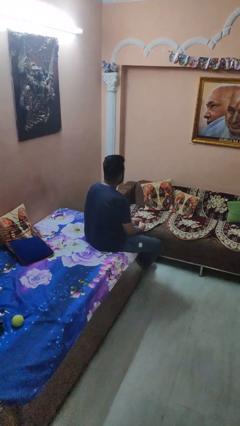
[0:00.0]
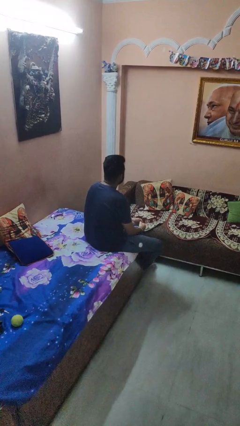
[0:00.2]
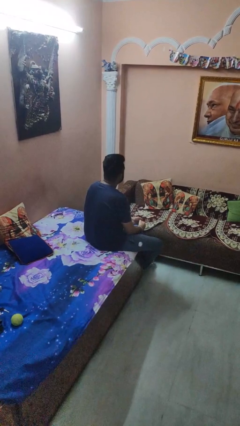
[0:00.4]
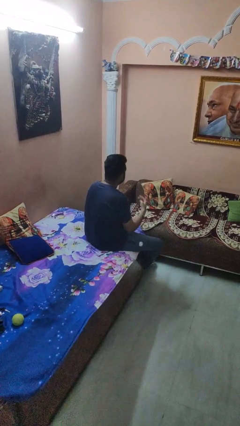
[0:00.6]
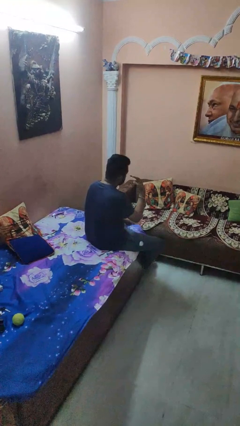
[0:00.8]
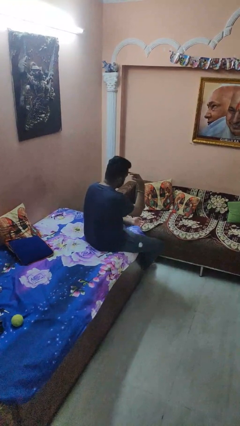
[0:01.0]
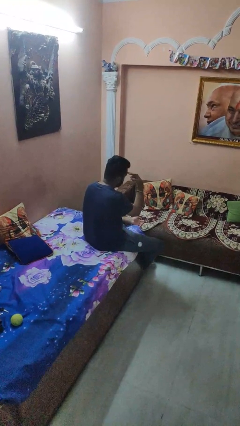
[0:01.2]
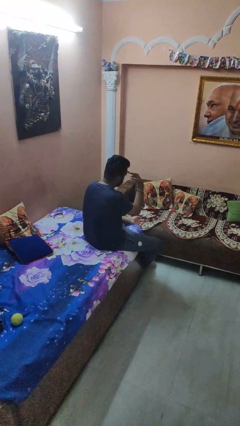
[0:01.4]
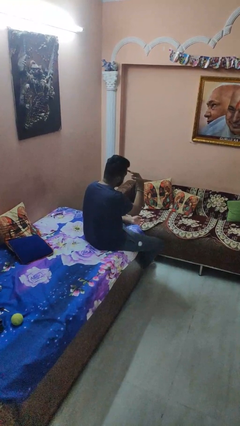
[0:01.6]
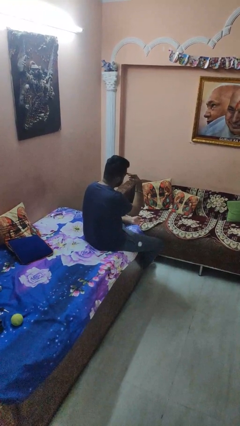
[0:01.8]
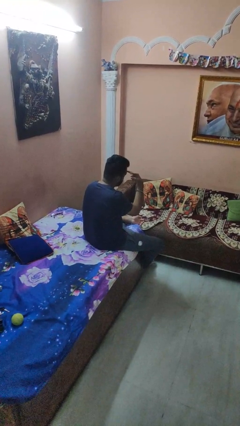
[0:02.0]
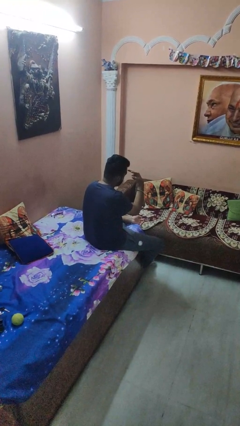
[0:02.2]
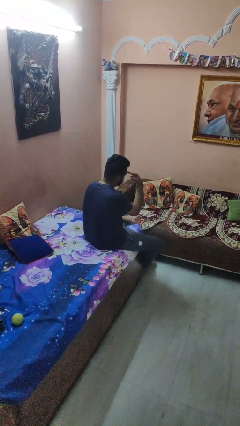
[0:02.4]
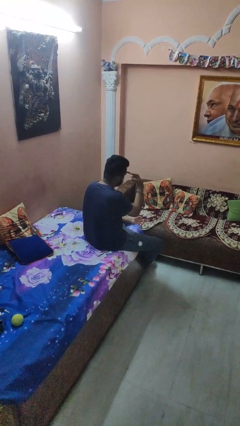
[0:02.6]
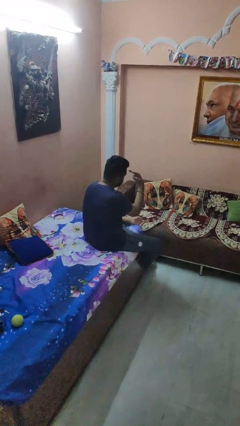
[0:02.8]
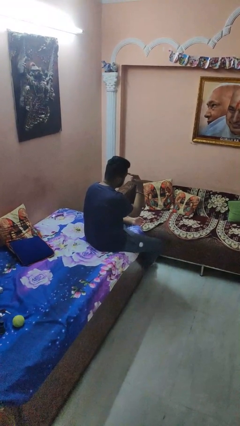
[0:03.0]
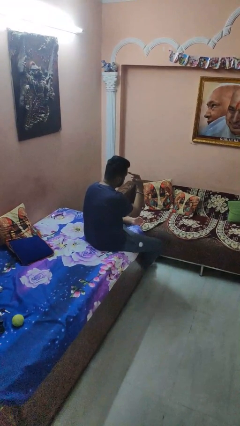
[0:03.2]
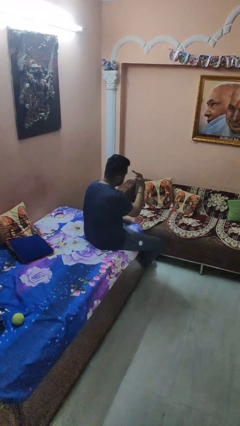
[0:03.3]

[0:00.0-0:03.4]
person gestures watch closely

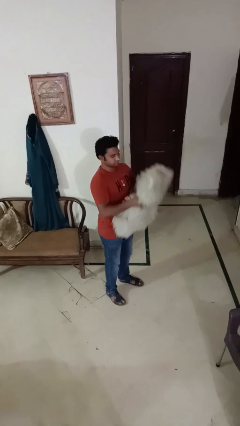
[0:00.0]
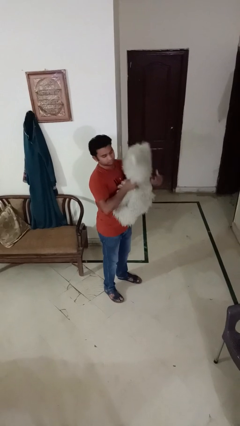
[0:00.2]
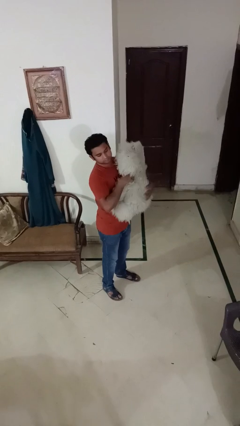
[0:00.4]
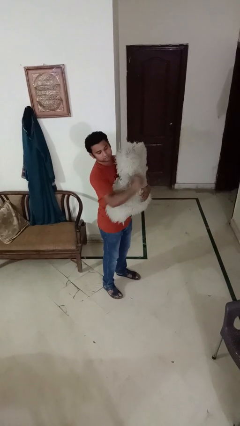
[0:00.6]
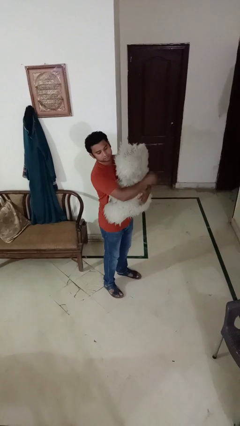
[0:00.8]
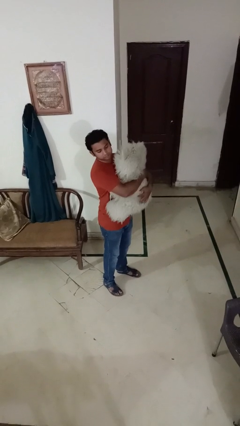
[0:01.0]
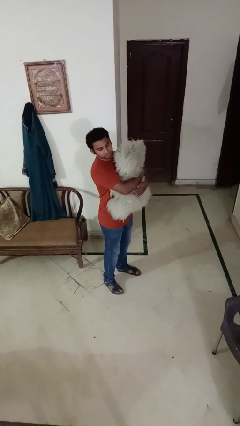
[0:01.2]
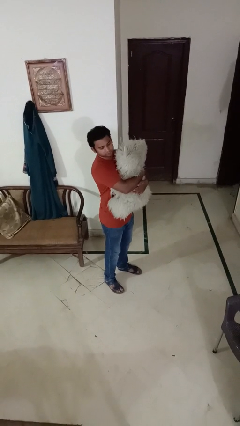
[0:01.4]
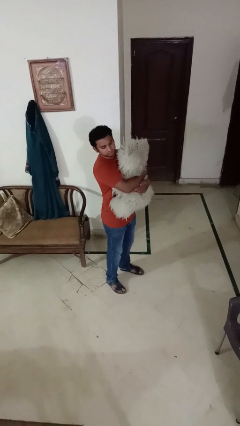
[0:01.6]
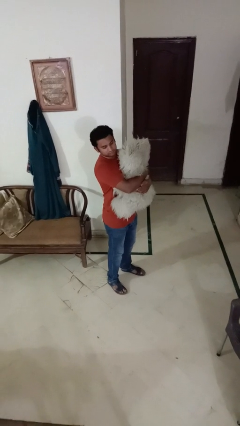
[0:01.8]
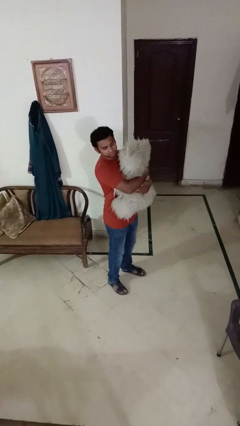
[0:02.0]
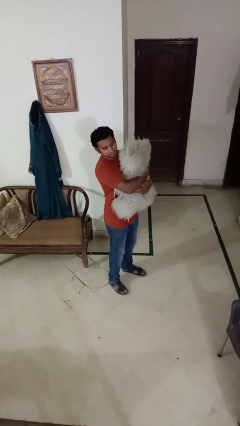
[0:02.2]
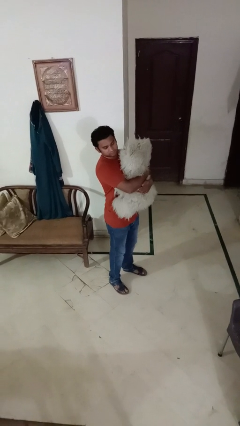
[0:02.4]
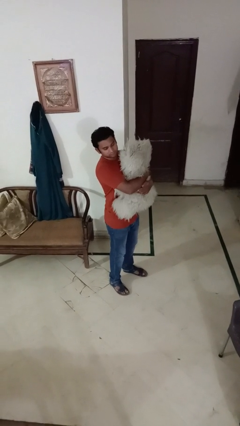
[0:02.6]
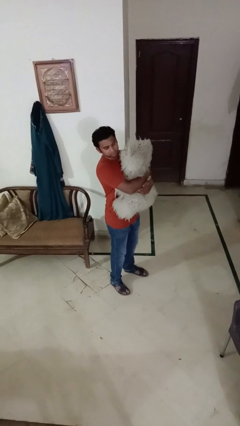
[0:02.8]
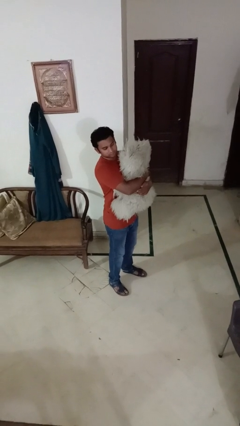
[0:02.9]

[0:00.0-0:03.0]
person hugs stuffed animal

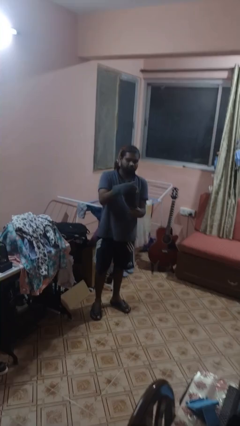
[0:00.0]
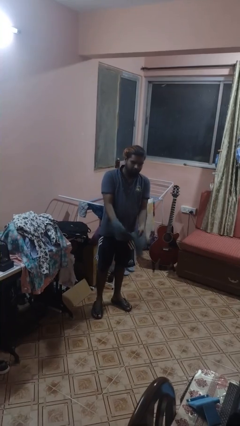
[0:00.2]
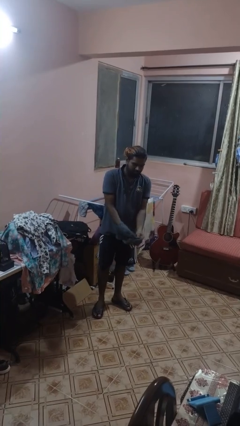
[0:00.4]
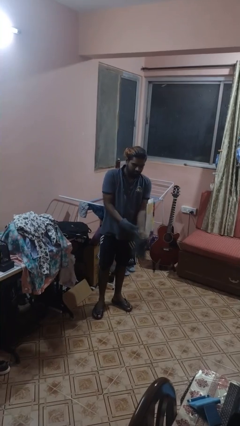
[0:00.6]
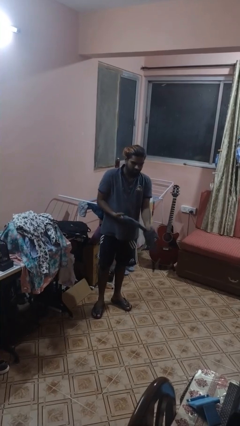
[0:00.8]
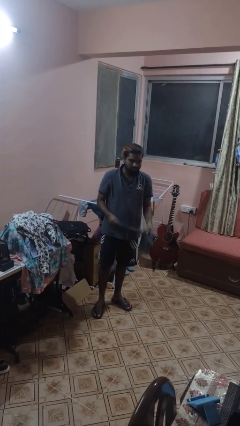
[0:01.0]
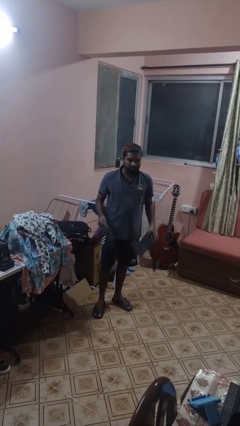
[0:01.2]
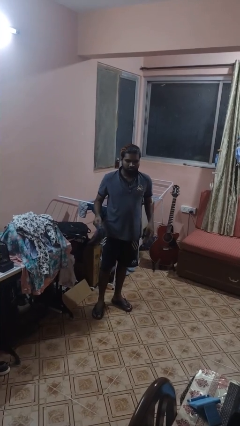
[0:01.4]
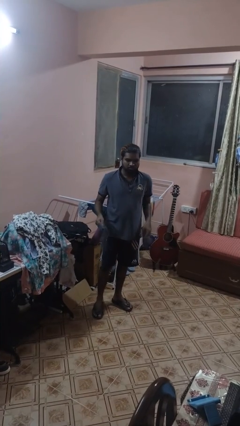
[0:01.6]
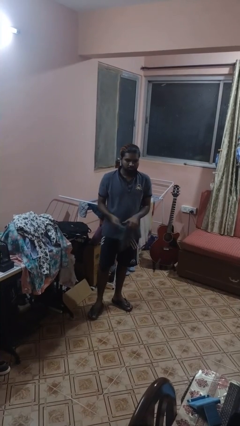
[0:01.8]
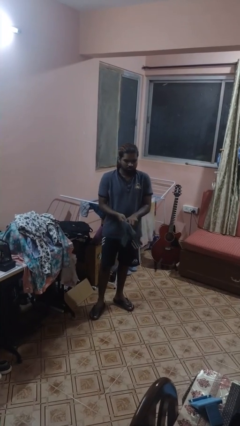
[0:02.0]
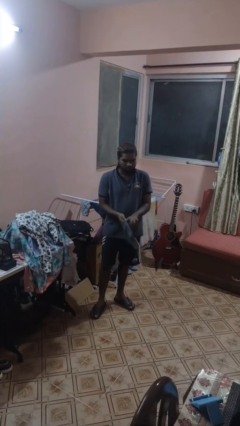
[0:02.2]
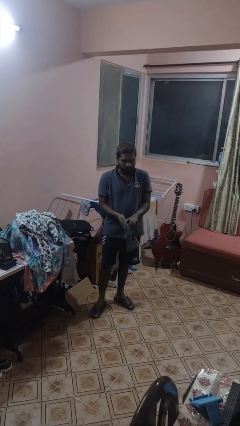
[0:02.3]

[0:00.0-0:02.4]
person takes off gloves

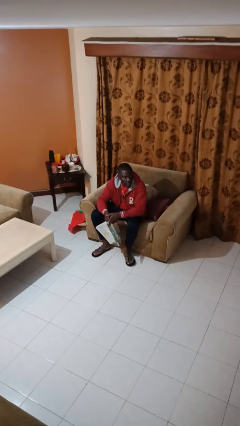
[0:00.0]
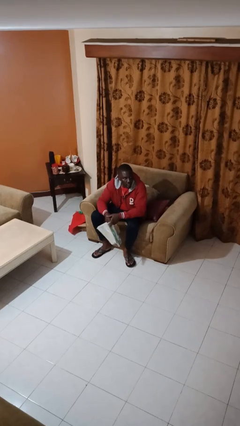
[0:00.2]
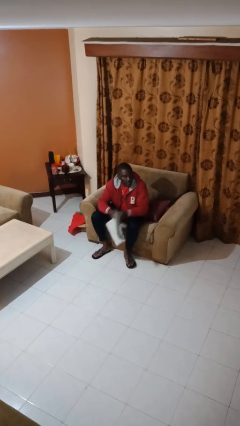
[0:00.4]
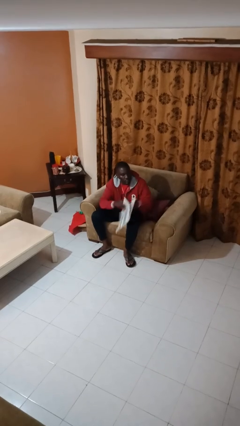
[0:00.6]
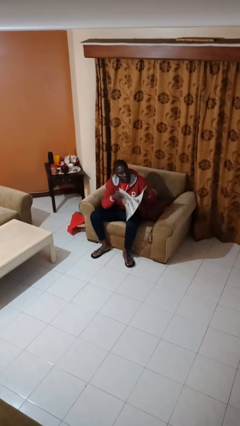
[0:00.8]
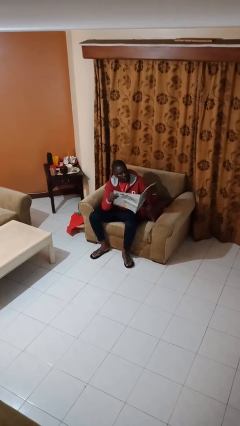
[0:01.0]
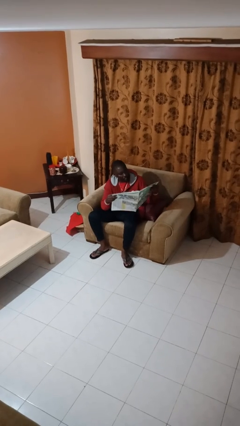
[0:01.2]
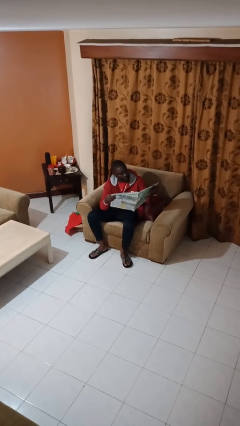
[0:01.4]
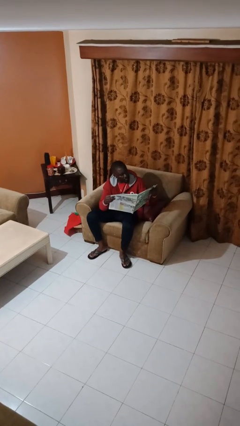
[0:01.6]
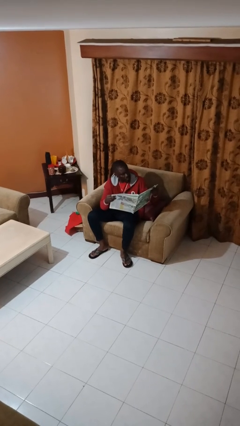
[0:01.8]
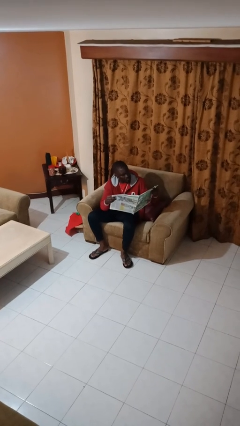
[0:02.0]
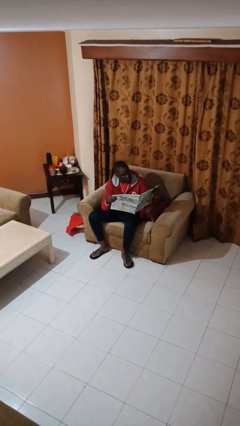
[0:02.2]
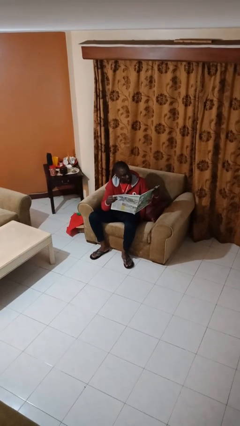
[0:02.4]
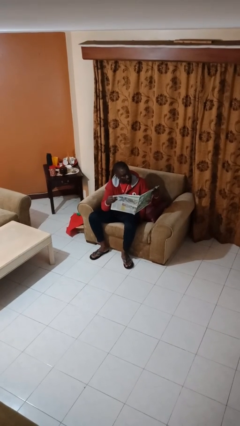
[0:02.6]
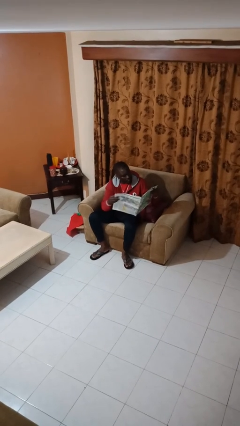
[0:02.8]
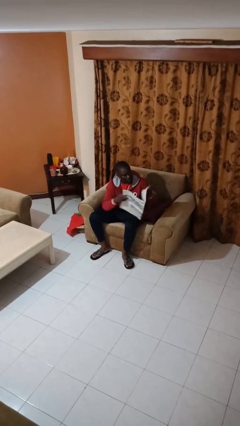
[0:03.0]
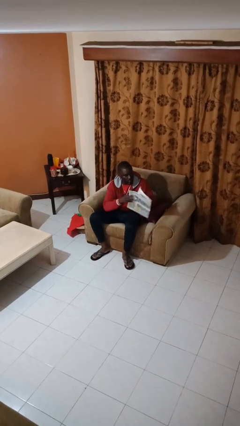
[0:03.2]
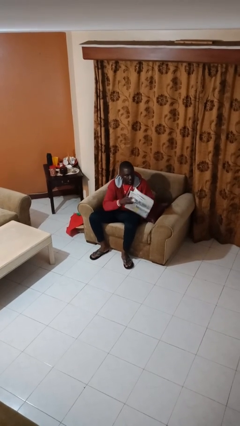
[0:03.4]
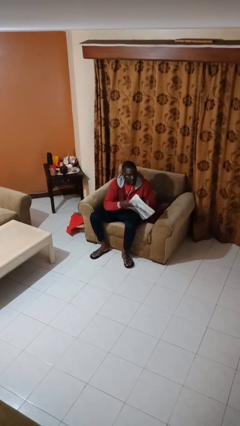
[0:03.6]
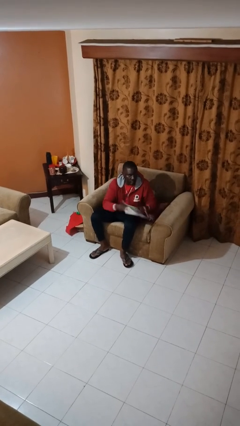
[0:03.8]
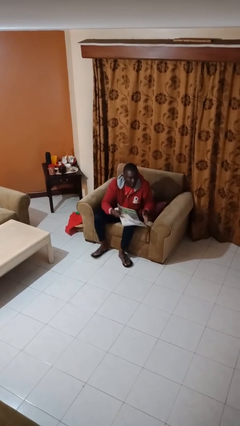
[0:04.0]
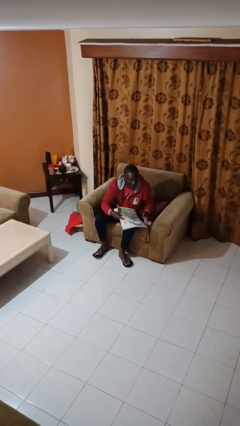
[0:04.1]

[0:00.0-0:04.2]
person reads newspaper

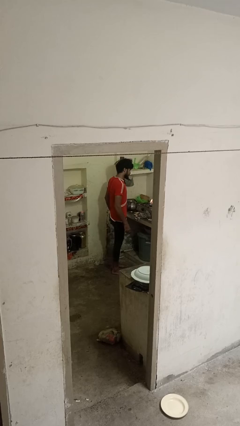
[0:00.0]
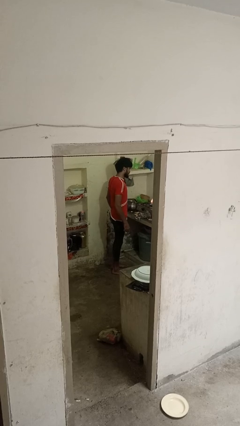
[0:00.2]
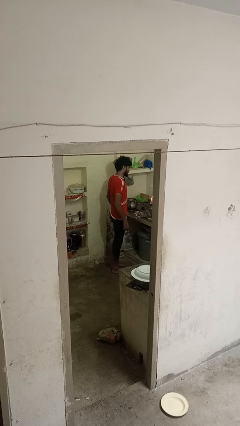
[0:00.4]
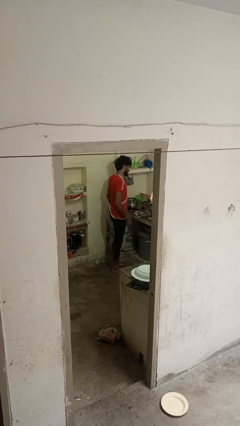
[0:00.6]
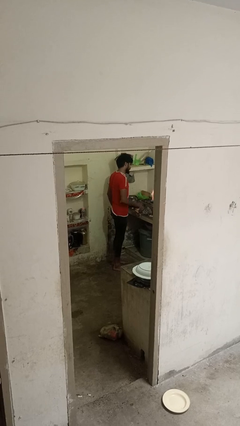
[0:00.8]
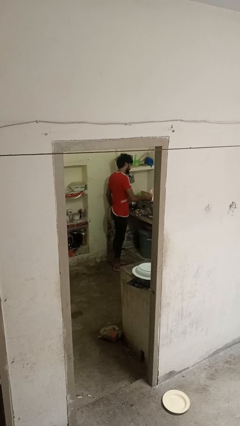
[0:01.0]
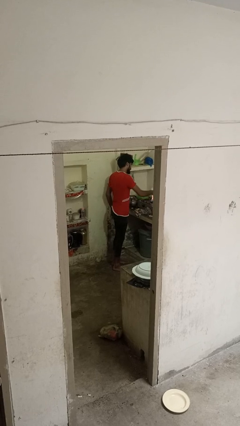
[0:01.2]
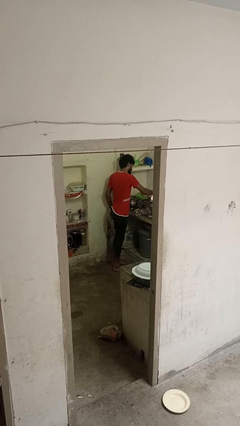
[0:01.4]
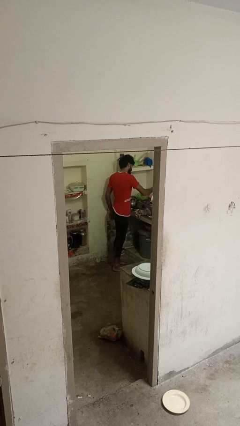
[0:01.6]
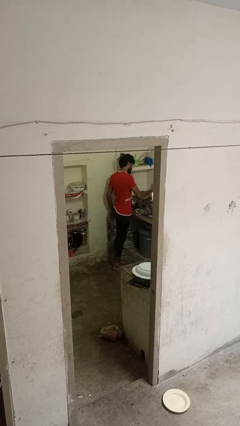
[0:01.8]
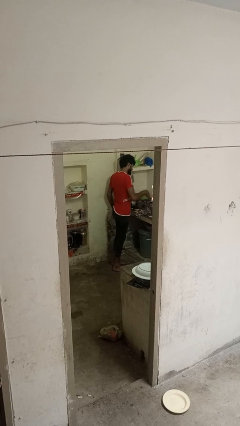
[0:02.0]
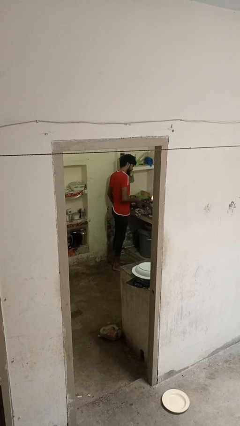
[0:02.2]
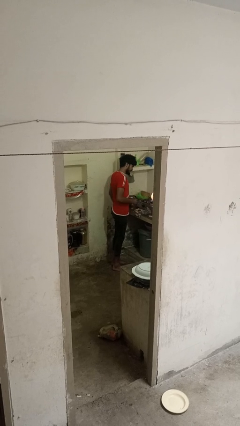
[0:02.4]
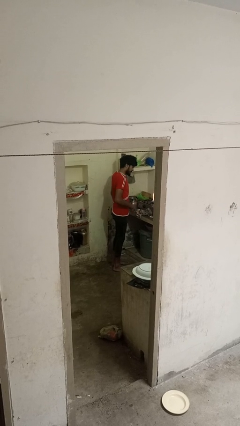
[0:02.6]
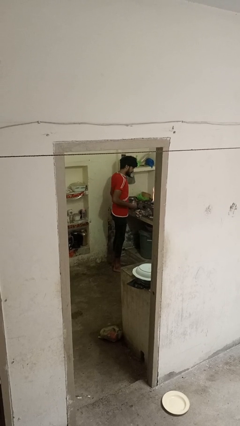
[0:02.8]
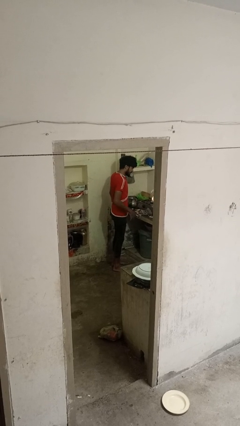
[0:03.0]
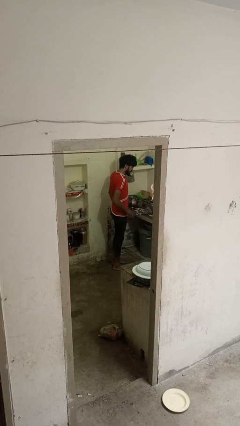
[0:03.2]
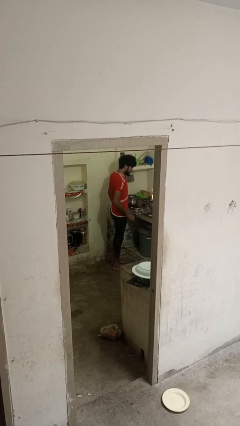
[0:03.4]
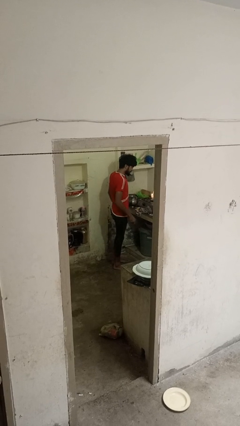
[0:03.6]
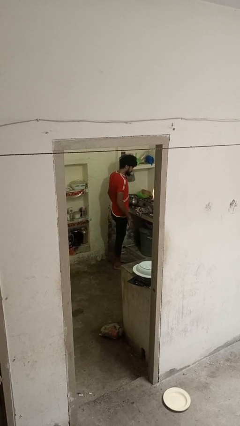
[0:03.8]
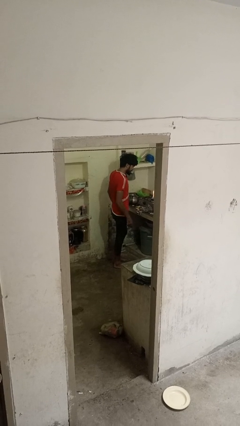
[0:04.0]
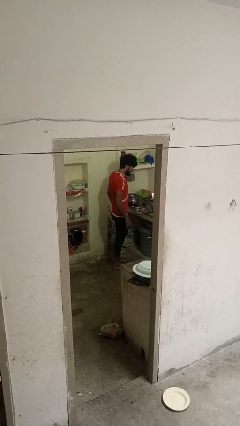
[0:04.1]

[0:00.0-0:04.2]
person burns hand

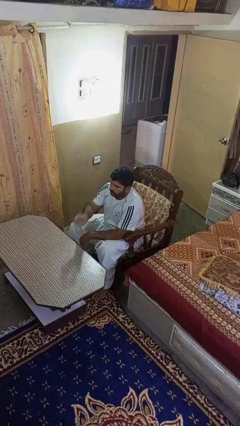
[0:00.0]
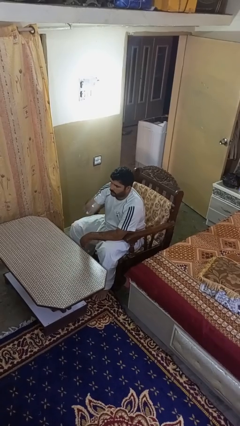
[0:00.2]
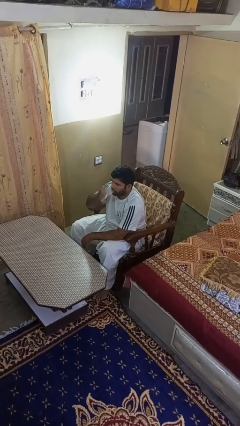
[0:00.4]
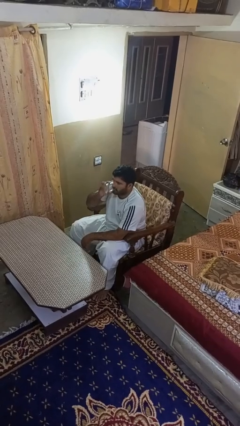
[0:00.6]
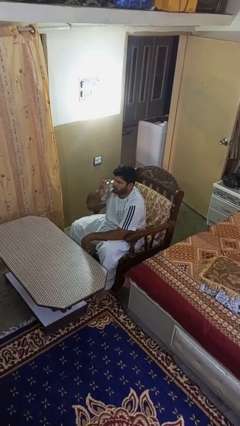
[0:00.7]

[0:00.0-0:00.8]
person drinks from shotglass
